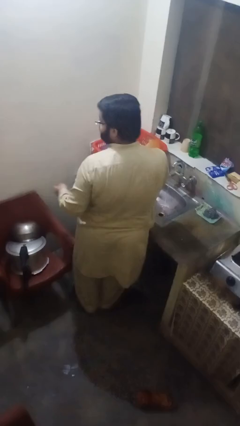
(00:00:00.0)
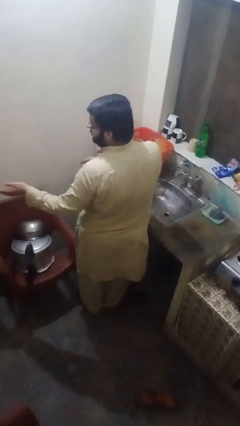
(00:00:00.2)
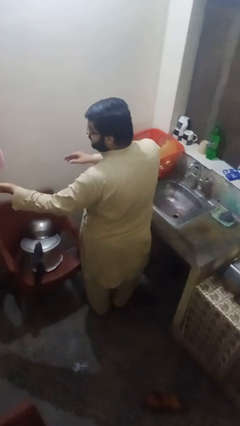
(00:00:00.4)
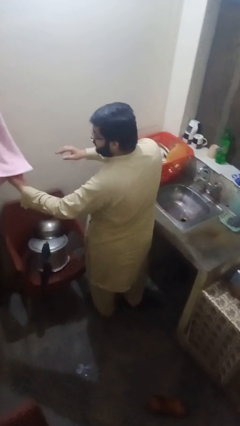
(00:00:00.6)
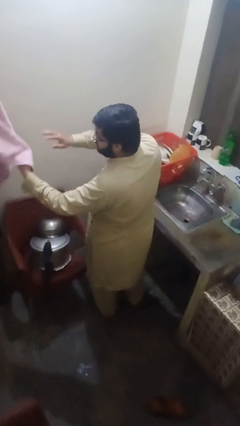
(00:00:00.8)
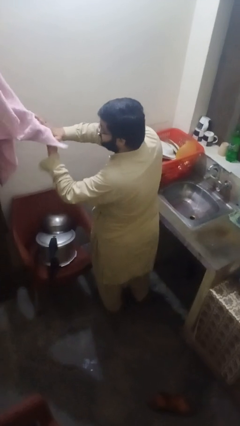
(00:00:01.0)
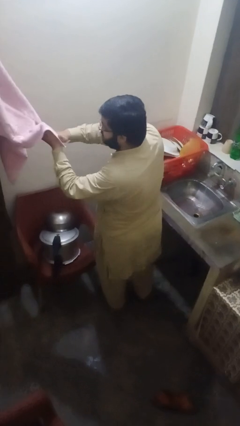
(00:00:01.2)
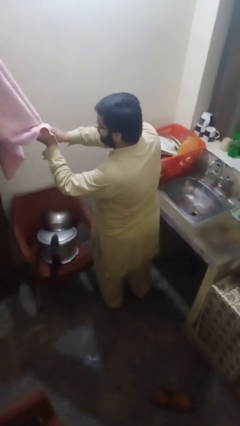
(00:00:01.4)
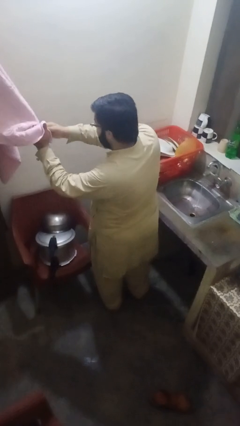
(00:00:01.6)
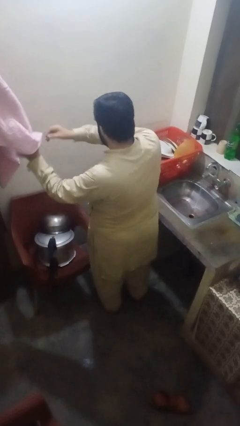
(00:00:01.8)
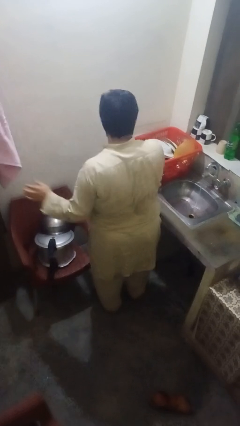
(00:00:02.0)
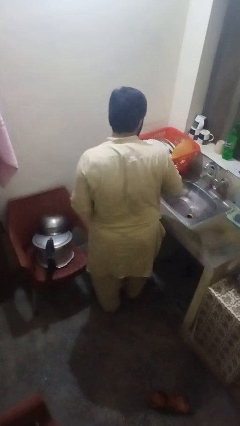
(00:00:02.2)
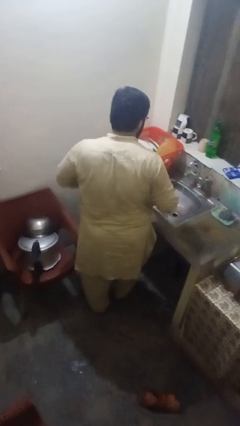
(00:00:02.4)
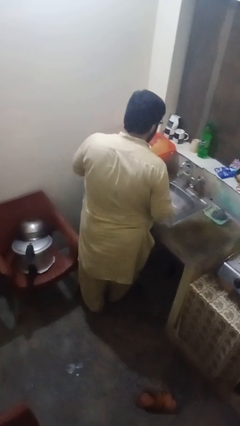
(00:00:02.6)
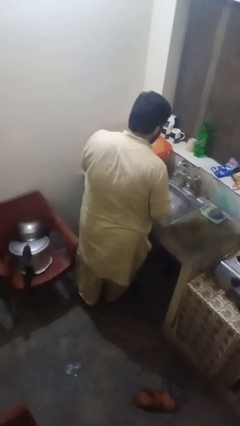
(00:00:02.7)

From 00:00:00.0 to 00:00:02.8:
person dries hands with towel

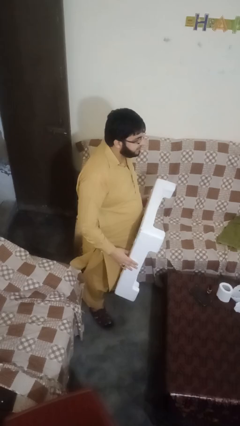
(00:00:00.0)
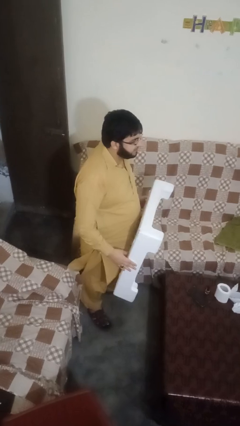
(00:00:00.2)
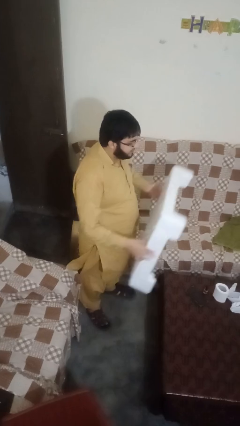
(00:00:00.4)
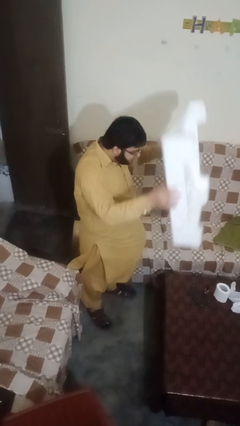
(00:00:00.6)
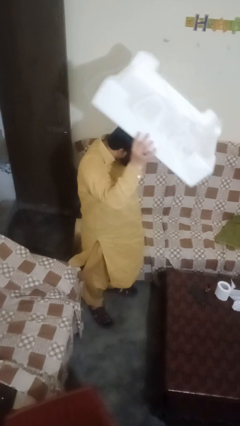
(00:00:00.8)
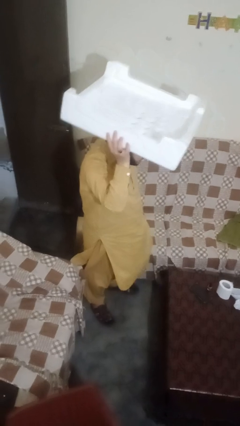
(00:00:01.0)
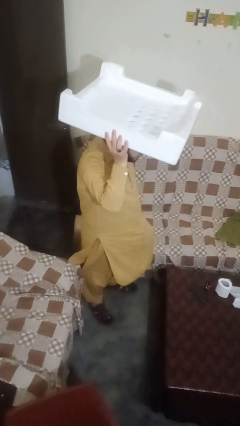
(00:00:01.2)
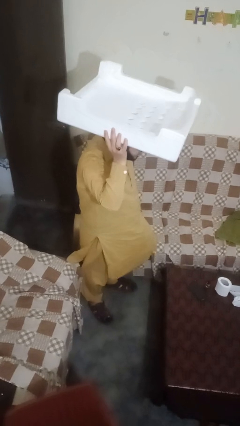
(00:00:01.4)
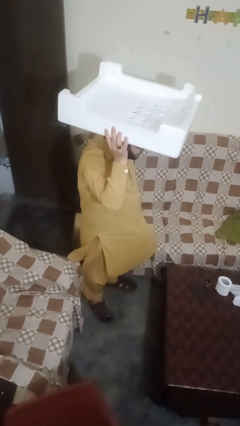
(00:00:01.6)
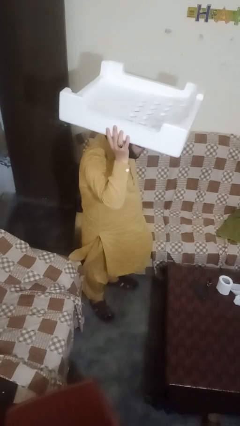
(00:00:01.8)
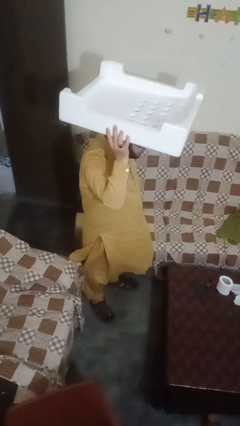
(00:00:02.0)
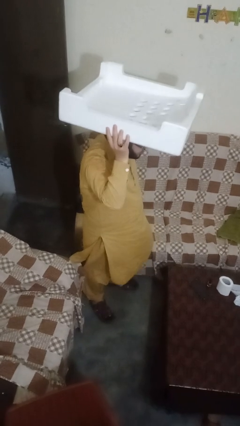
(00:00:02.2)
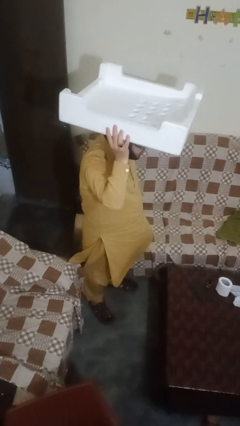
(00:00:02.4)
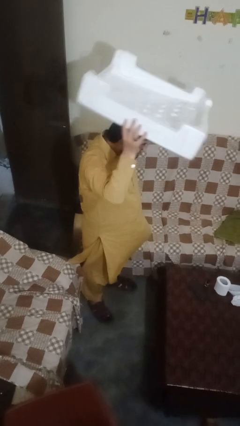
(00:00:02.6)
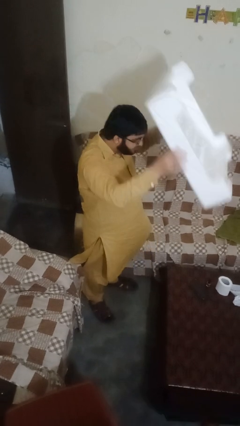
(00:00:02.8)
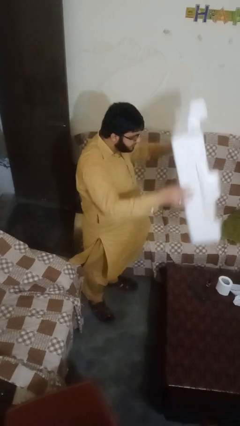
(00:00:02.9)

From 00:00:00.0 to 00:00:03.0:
person holds object above head

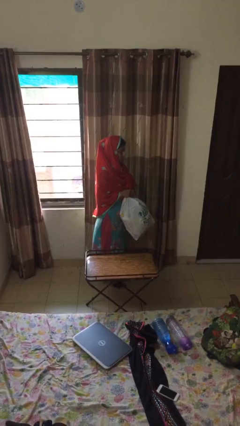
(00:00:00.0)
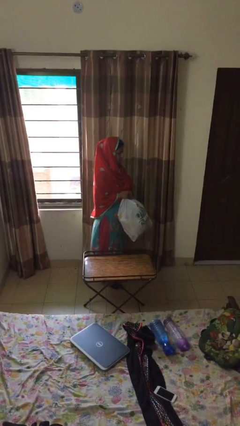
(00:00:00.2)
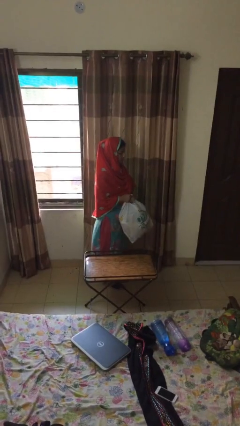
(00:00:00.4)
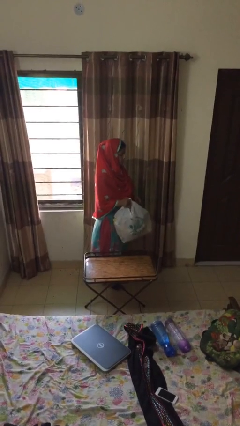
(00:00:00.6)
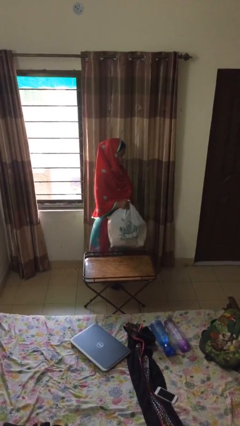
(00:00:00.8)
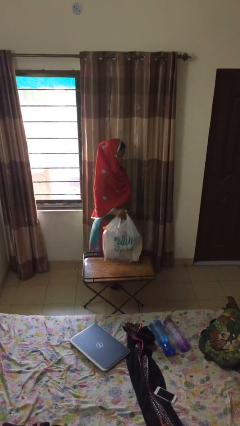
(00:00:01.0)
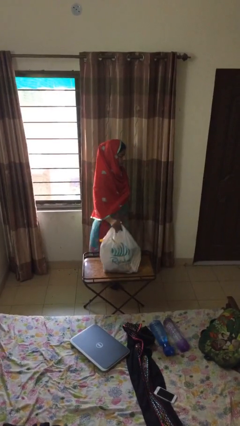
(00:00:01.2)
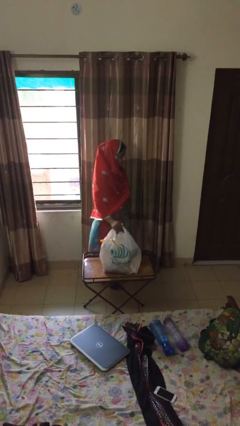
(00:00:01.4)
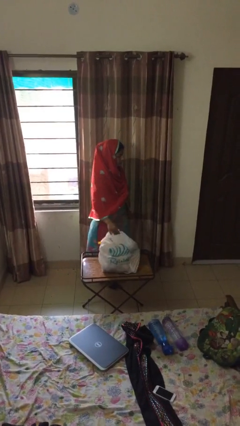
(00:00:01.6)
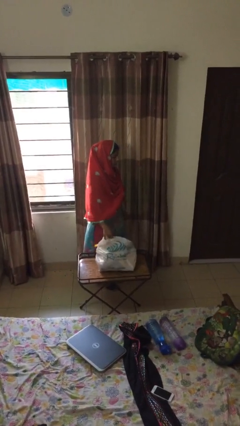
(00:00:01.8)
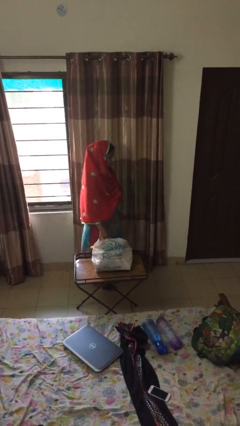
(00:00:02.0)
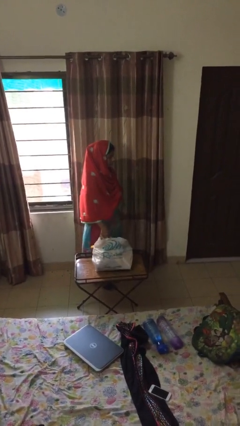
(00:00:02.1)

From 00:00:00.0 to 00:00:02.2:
person puts down object on table

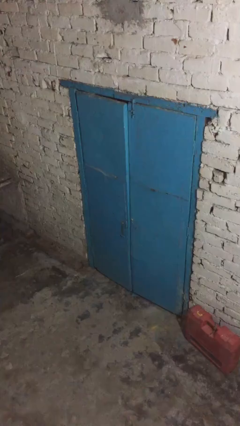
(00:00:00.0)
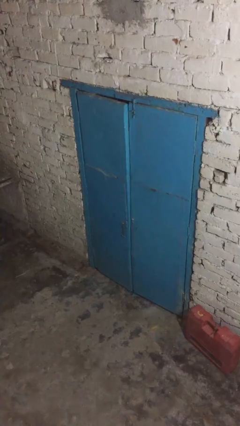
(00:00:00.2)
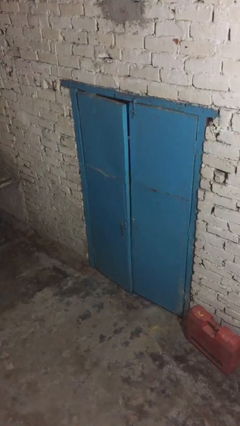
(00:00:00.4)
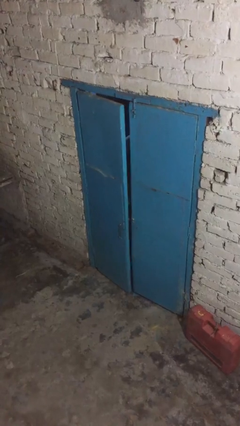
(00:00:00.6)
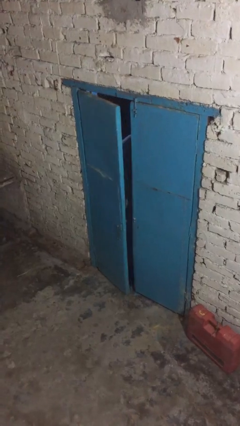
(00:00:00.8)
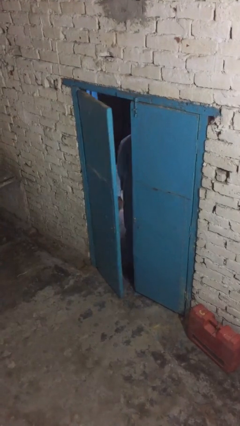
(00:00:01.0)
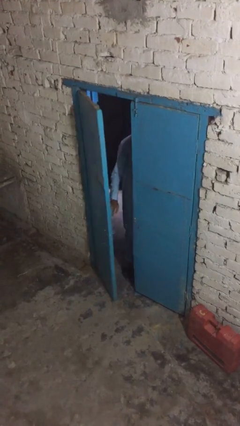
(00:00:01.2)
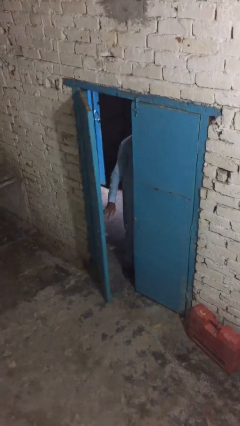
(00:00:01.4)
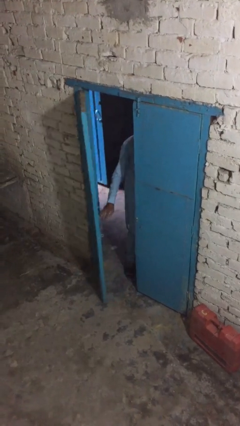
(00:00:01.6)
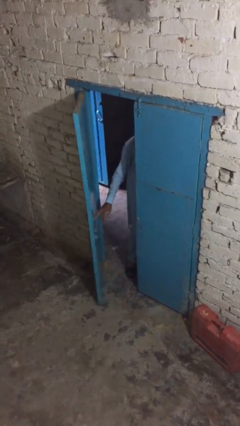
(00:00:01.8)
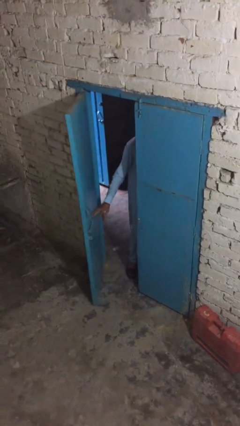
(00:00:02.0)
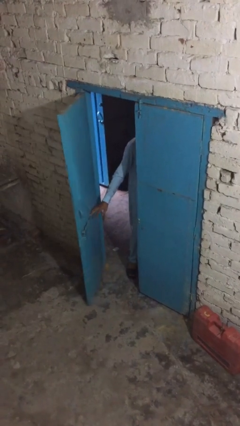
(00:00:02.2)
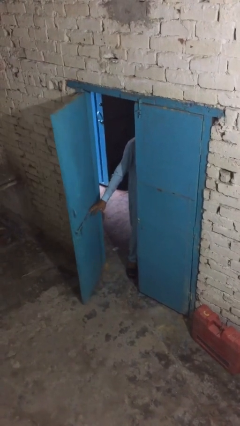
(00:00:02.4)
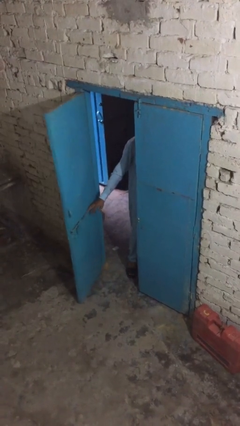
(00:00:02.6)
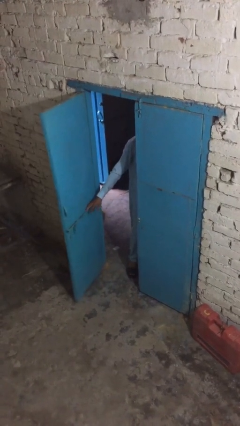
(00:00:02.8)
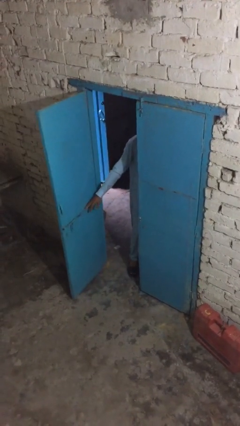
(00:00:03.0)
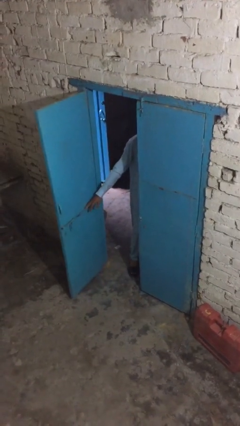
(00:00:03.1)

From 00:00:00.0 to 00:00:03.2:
person opens facility door

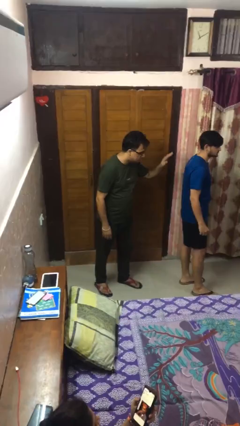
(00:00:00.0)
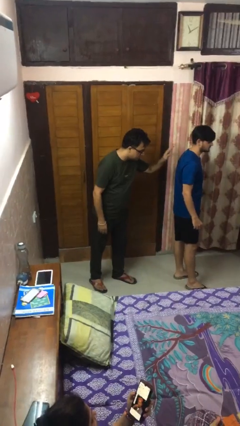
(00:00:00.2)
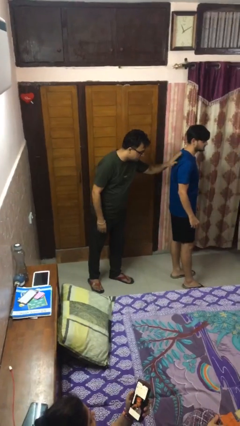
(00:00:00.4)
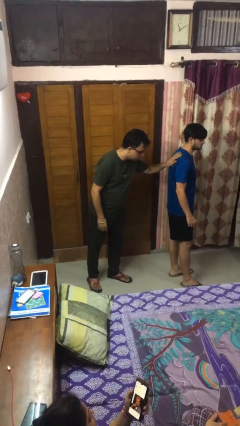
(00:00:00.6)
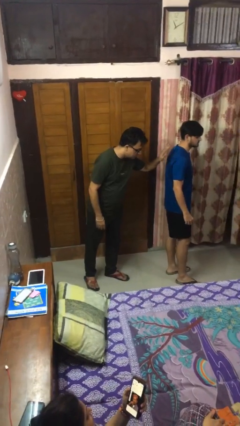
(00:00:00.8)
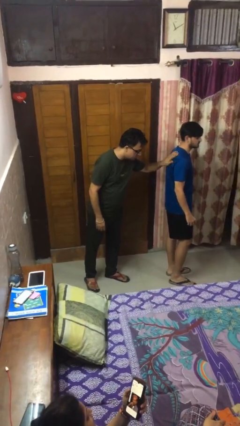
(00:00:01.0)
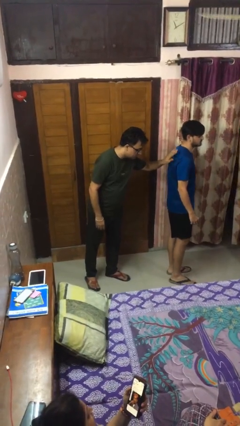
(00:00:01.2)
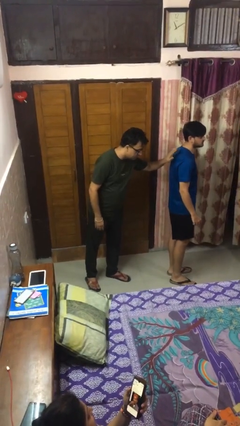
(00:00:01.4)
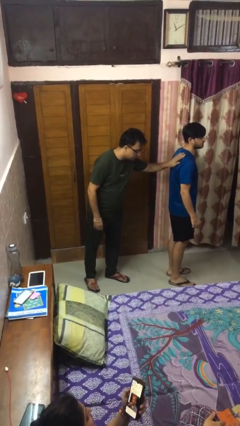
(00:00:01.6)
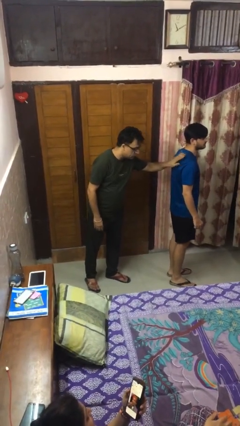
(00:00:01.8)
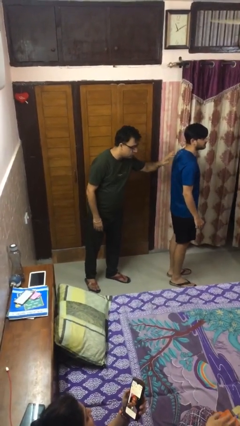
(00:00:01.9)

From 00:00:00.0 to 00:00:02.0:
person touches back of person

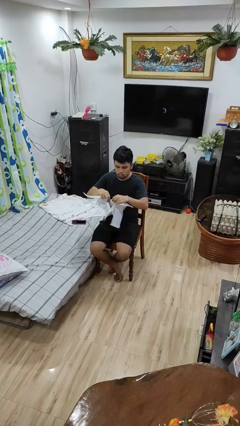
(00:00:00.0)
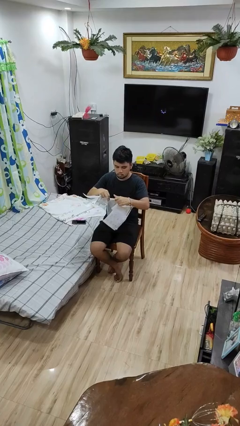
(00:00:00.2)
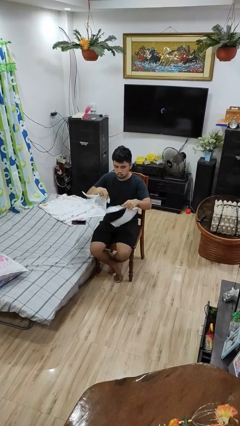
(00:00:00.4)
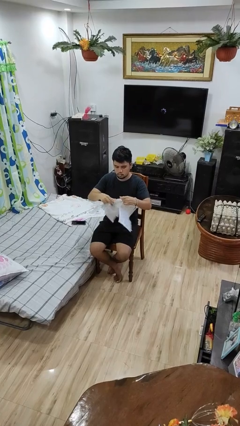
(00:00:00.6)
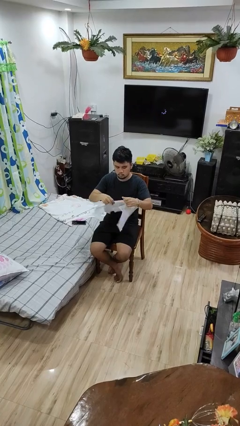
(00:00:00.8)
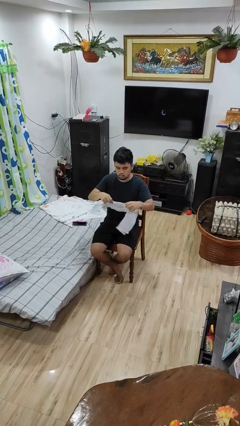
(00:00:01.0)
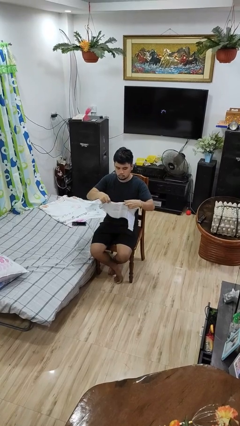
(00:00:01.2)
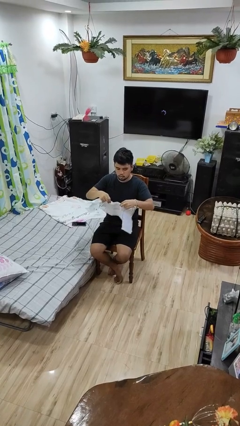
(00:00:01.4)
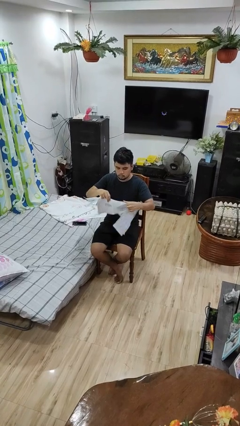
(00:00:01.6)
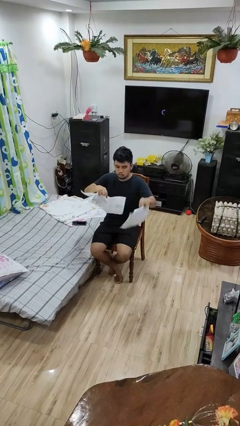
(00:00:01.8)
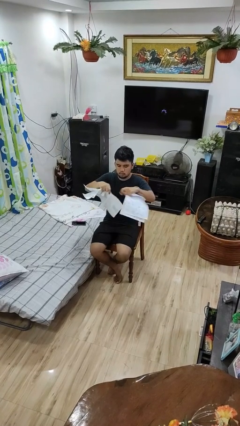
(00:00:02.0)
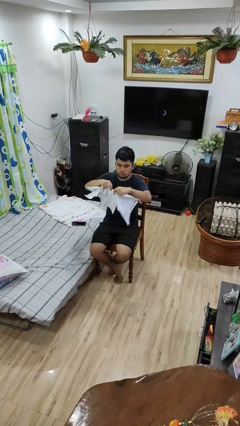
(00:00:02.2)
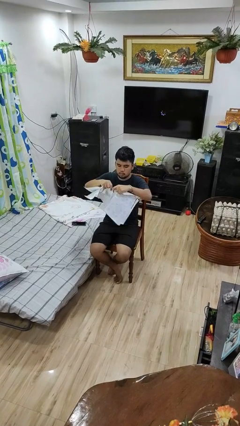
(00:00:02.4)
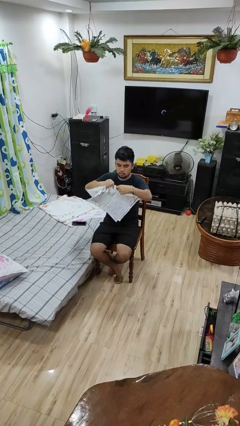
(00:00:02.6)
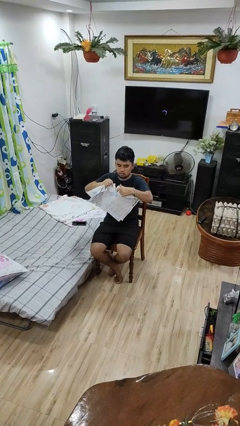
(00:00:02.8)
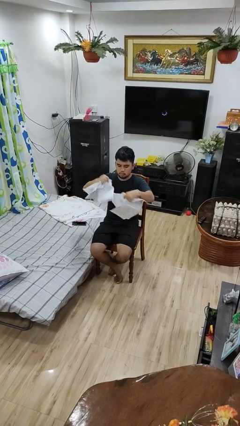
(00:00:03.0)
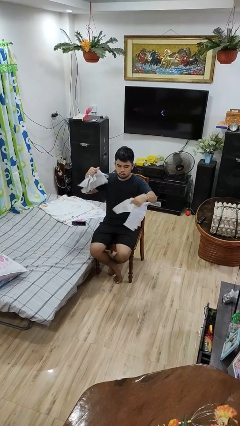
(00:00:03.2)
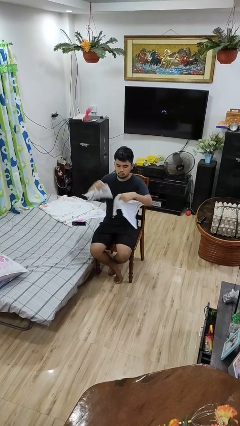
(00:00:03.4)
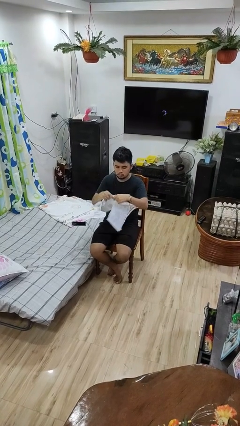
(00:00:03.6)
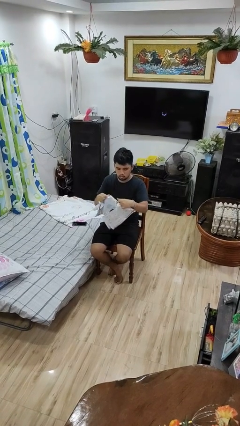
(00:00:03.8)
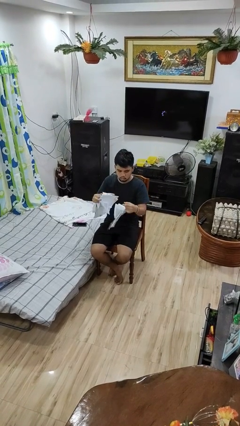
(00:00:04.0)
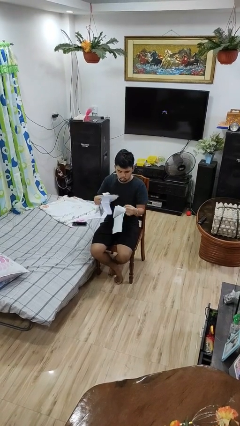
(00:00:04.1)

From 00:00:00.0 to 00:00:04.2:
person tears paper
